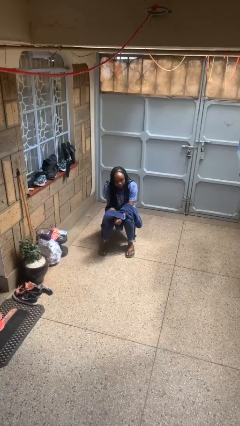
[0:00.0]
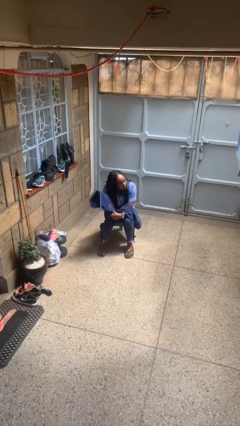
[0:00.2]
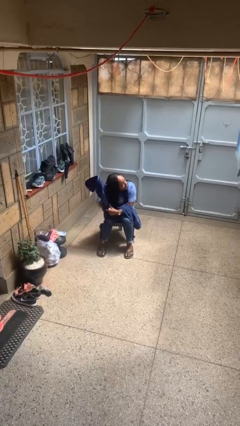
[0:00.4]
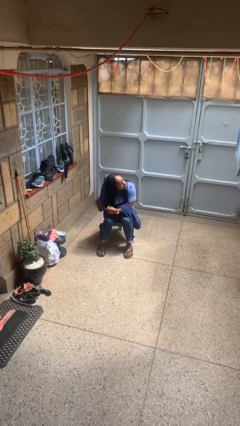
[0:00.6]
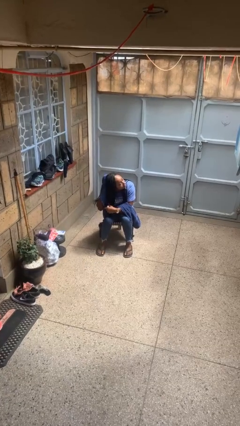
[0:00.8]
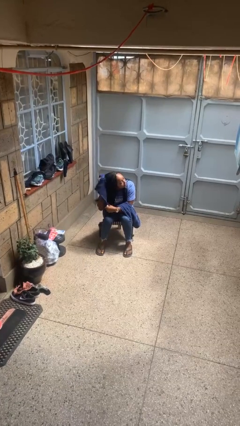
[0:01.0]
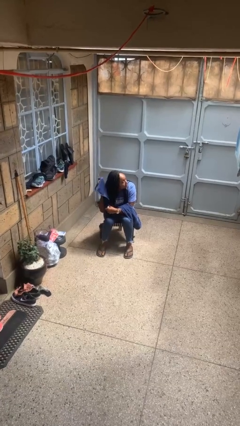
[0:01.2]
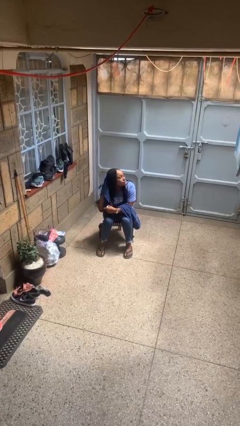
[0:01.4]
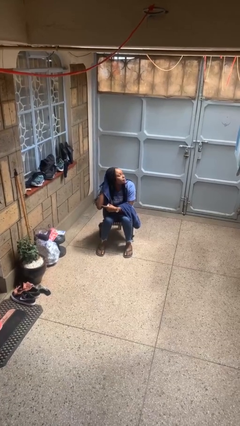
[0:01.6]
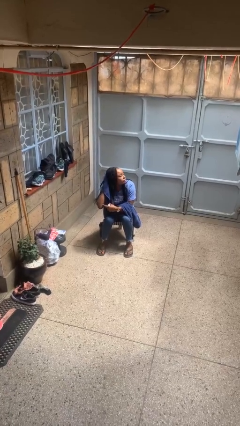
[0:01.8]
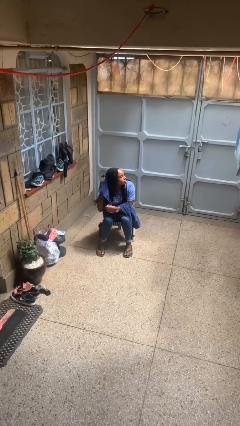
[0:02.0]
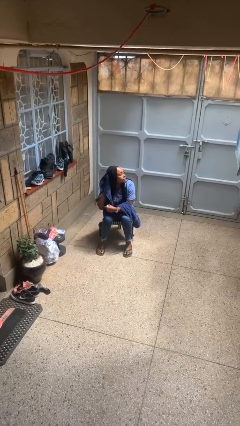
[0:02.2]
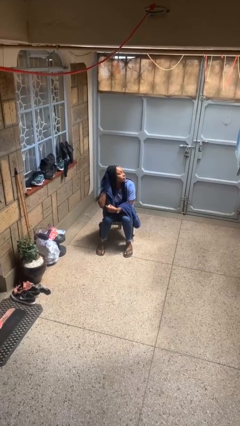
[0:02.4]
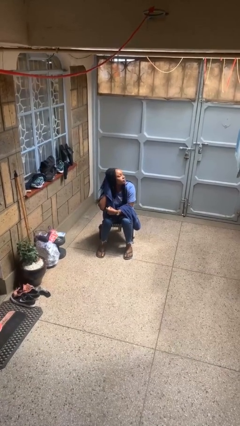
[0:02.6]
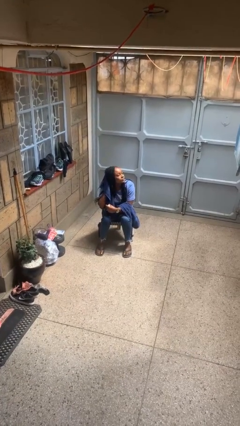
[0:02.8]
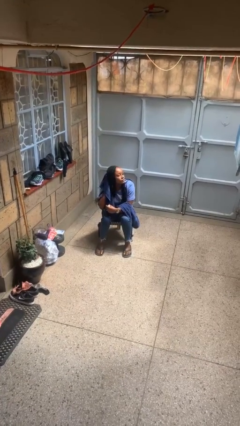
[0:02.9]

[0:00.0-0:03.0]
person dries hair with towel

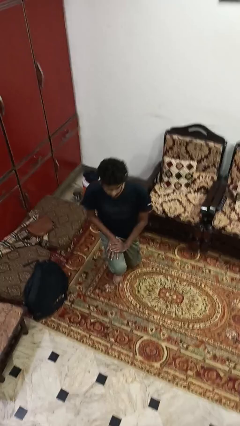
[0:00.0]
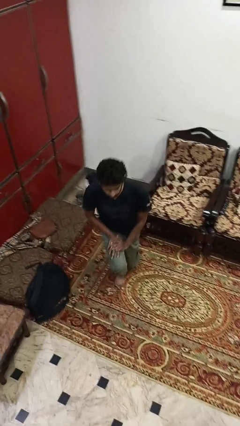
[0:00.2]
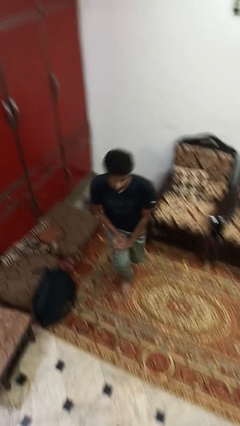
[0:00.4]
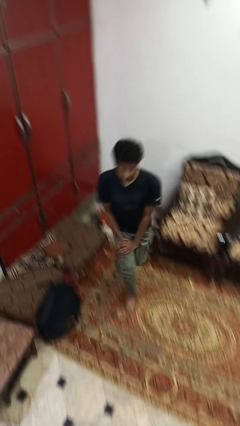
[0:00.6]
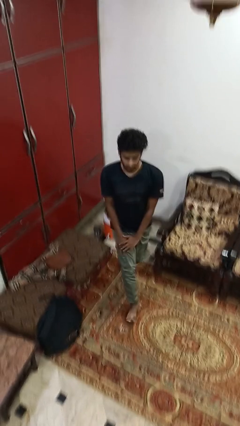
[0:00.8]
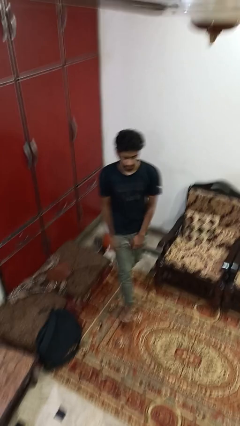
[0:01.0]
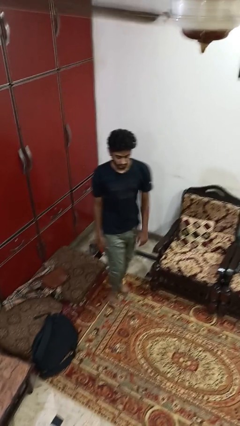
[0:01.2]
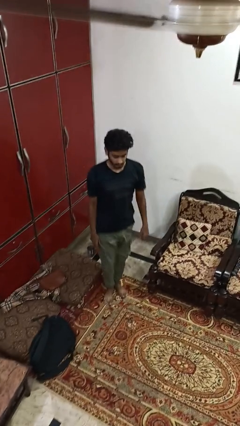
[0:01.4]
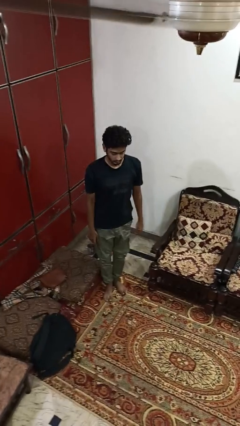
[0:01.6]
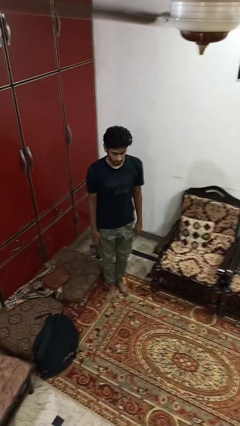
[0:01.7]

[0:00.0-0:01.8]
person stands up from floor

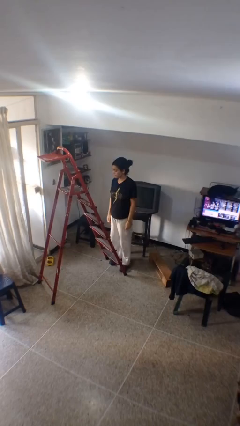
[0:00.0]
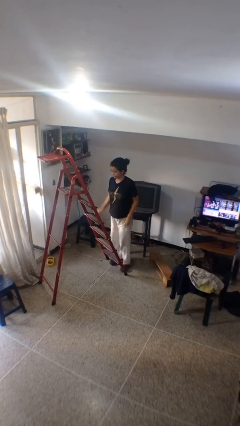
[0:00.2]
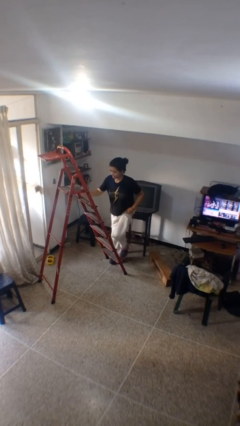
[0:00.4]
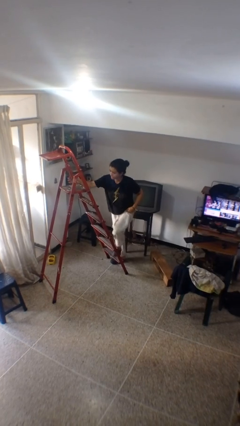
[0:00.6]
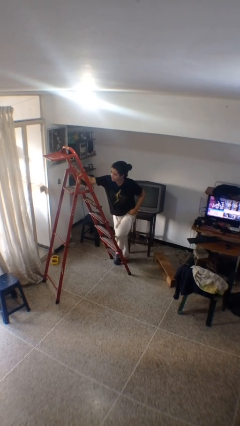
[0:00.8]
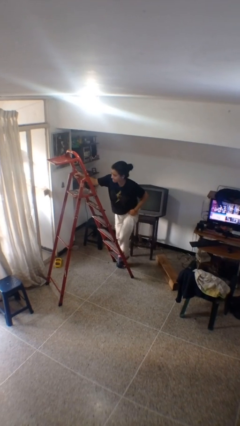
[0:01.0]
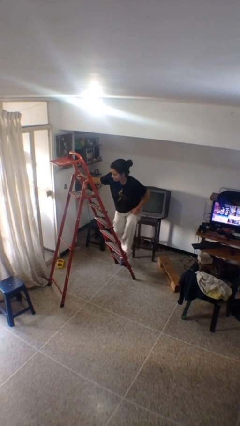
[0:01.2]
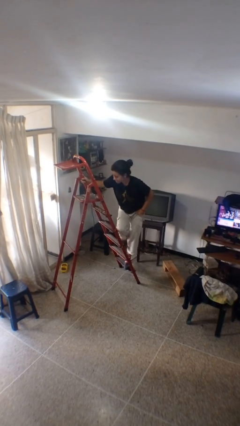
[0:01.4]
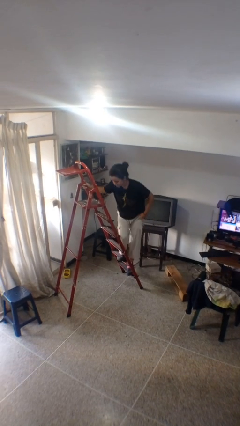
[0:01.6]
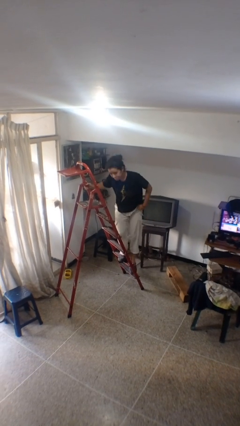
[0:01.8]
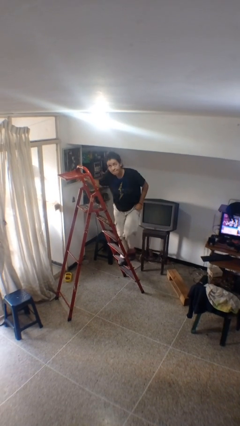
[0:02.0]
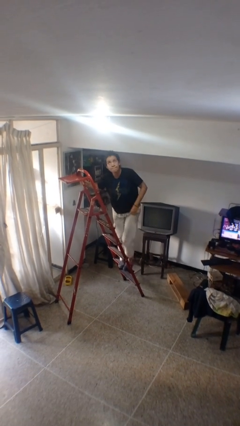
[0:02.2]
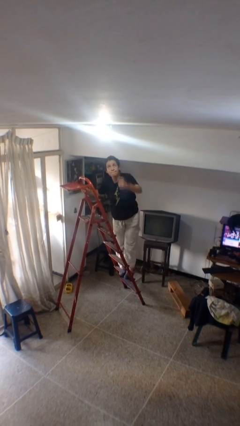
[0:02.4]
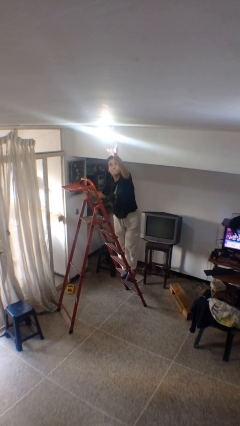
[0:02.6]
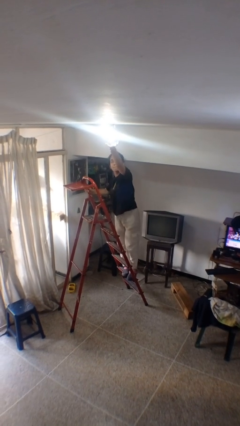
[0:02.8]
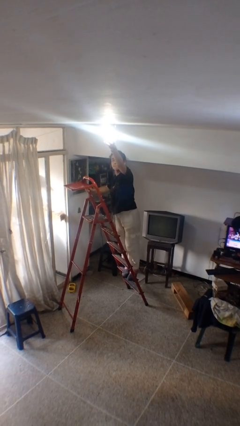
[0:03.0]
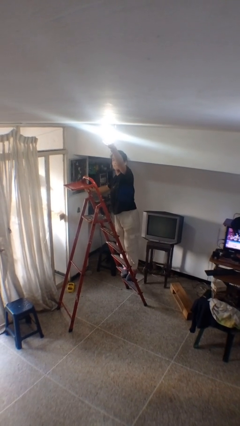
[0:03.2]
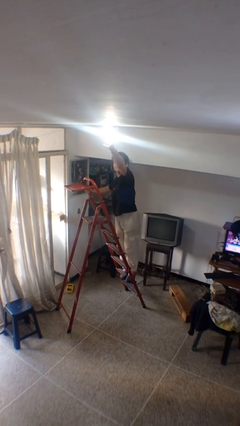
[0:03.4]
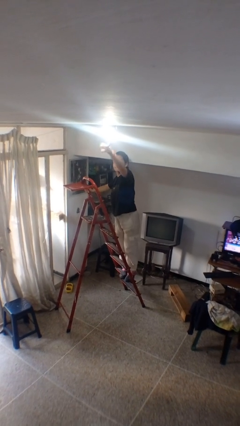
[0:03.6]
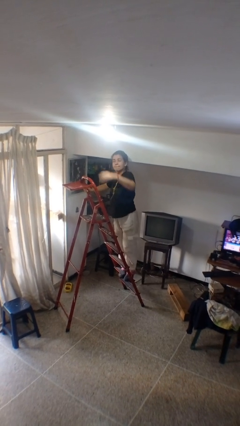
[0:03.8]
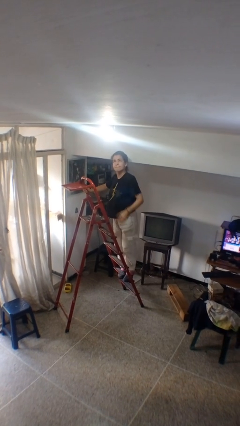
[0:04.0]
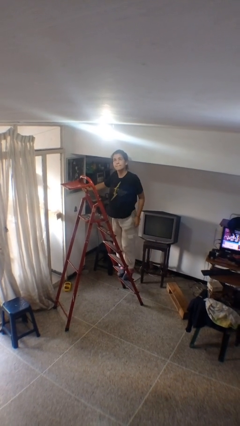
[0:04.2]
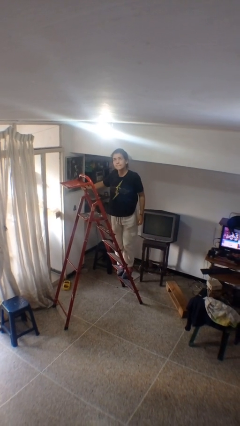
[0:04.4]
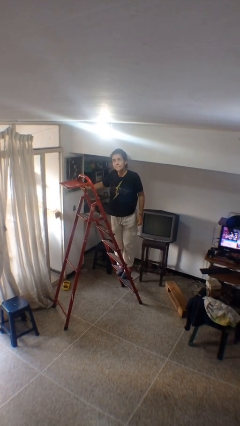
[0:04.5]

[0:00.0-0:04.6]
person climbs up ladder

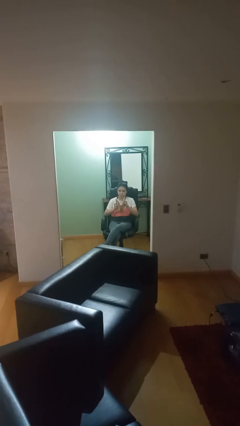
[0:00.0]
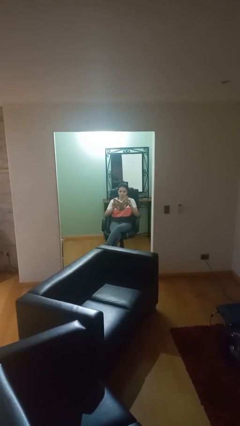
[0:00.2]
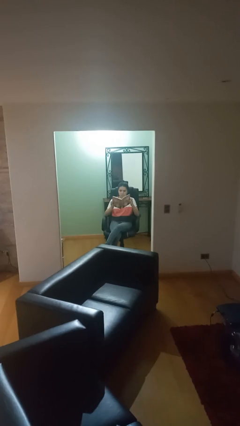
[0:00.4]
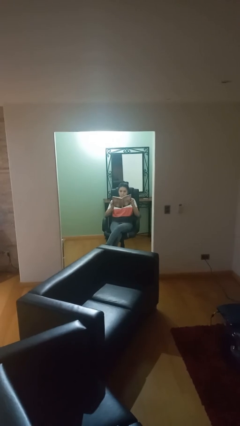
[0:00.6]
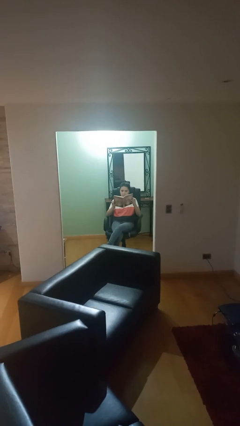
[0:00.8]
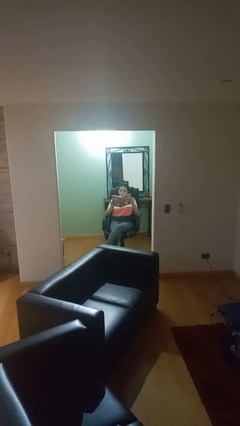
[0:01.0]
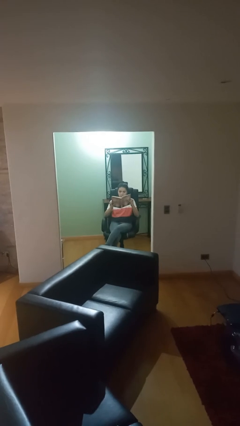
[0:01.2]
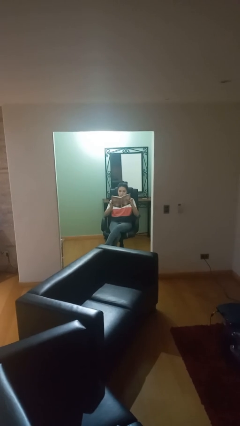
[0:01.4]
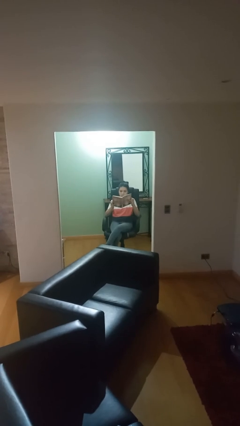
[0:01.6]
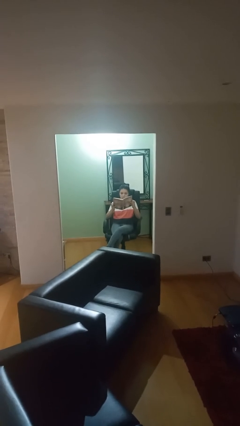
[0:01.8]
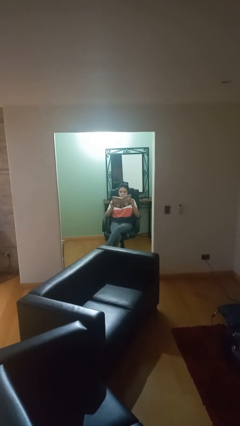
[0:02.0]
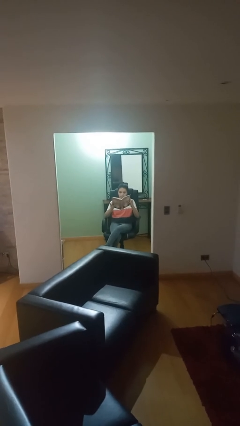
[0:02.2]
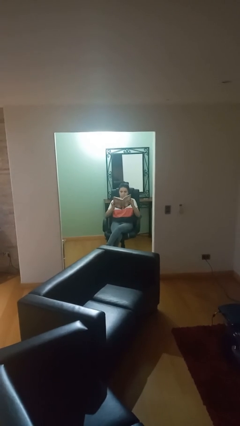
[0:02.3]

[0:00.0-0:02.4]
person reads document

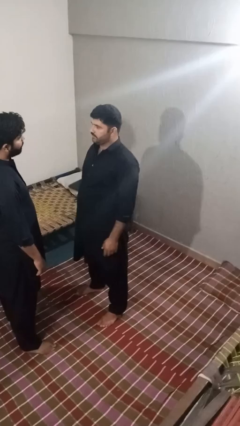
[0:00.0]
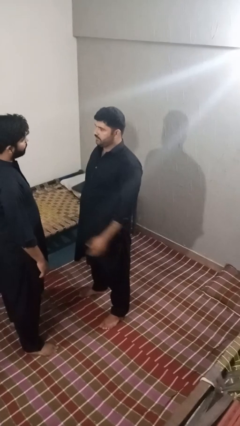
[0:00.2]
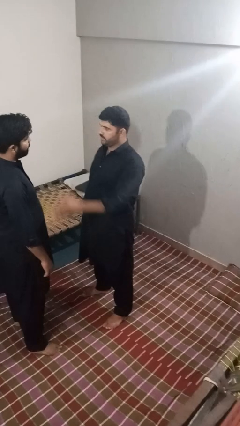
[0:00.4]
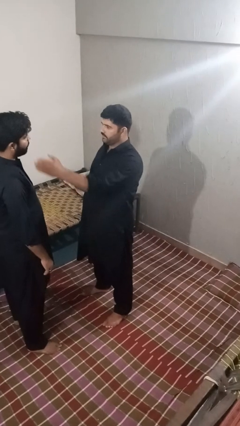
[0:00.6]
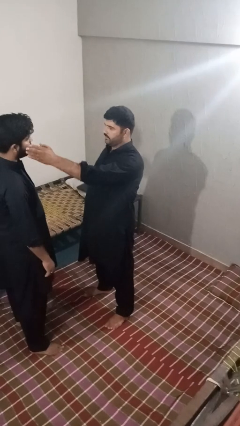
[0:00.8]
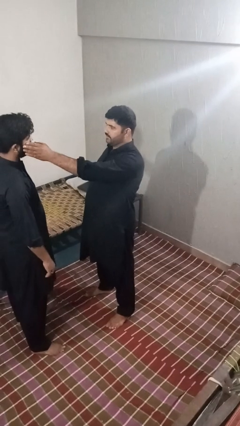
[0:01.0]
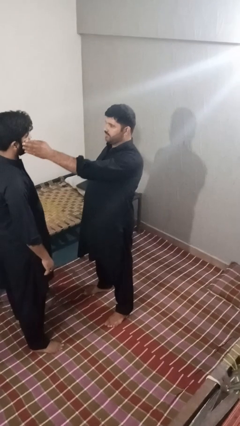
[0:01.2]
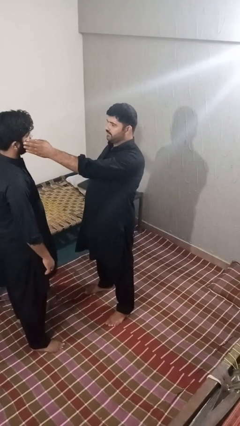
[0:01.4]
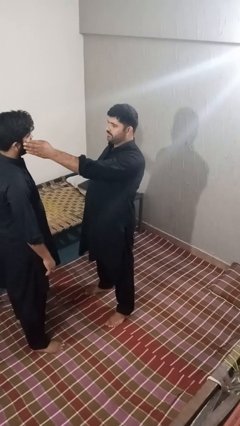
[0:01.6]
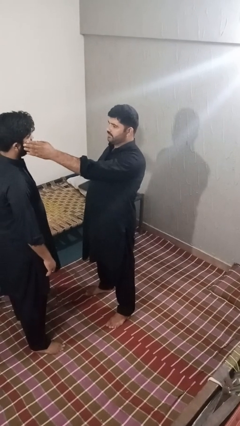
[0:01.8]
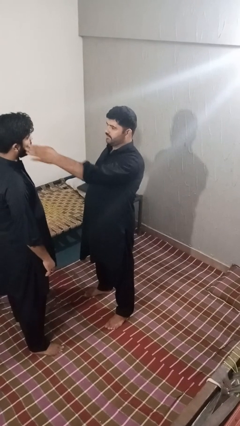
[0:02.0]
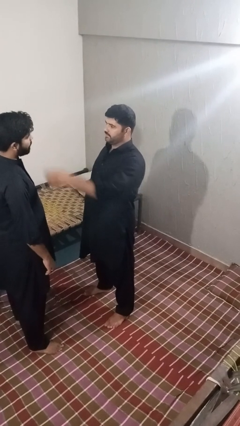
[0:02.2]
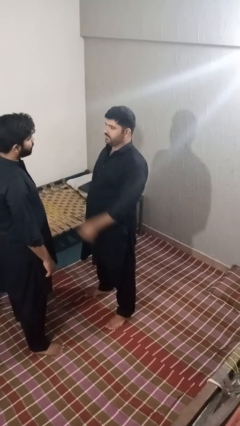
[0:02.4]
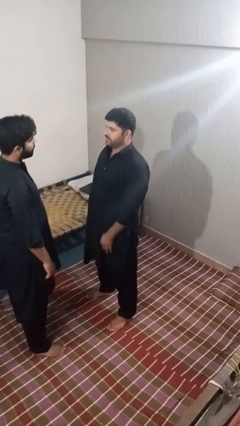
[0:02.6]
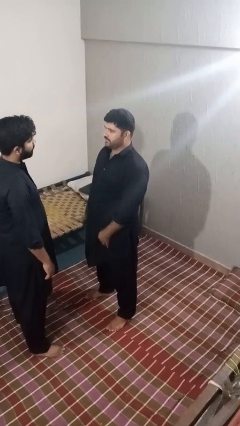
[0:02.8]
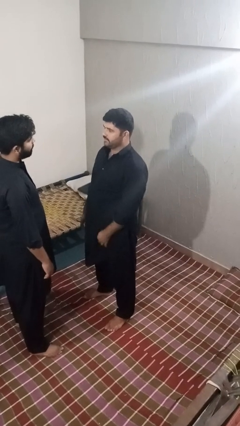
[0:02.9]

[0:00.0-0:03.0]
person touches face of person

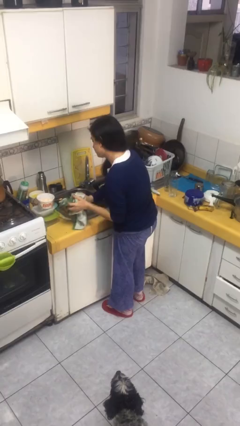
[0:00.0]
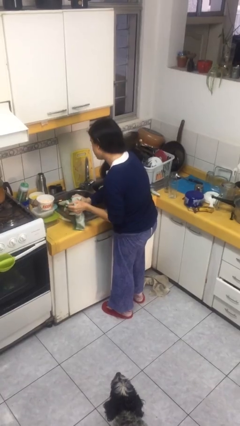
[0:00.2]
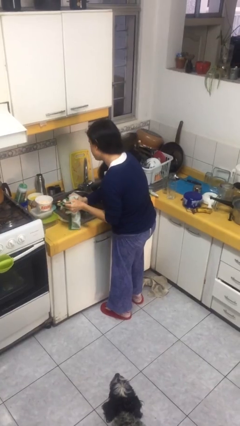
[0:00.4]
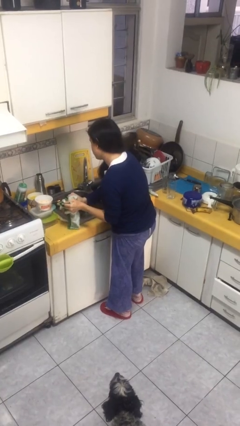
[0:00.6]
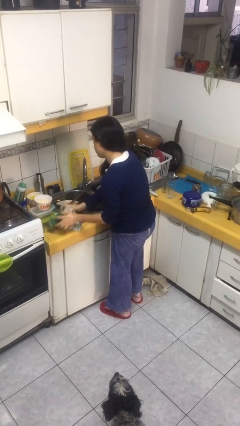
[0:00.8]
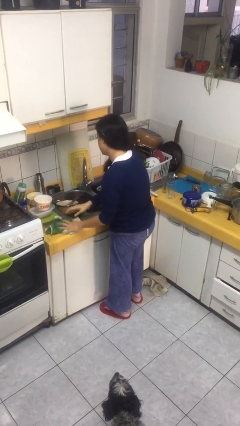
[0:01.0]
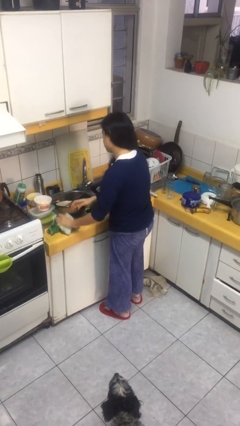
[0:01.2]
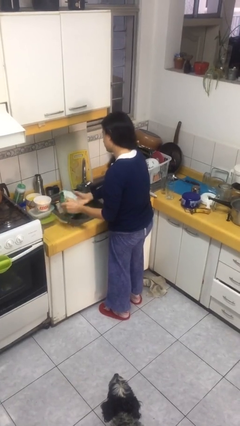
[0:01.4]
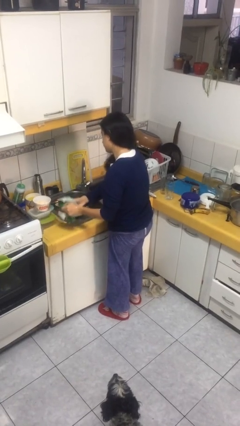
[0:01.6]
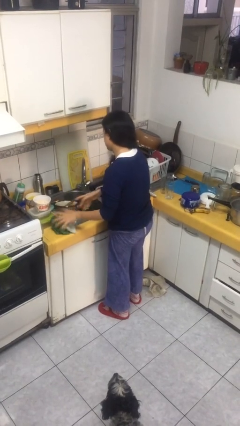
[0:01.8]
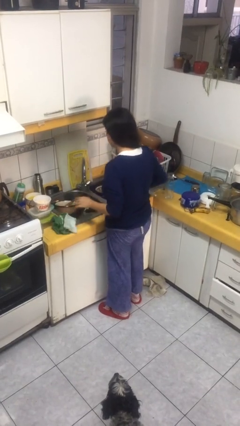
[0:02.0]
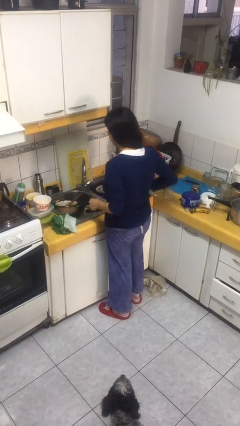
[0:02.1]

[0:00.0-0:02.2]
person dries hands with towel
